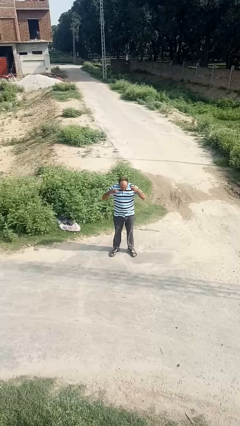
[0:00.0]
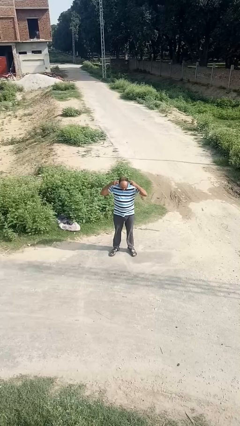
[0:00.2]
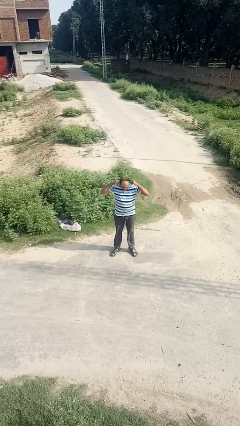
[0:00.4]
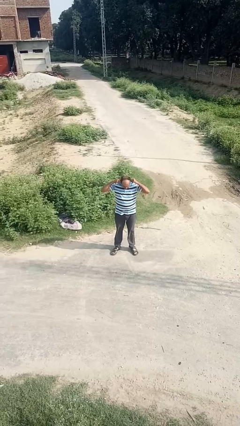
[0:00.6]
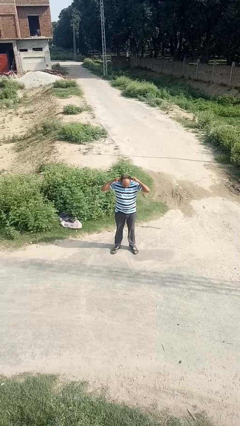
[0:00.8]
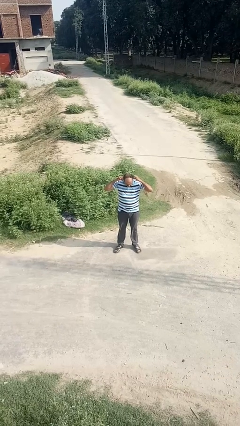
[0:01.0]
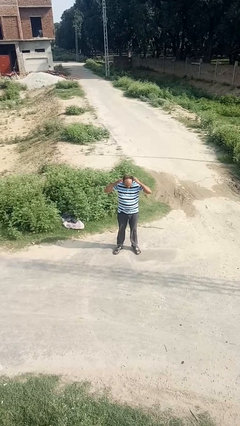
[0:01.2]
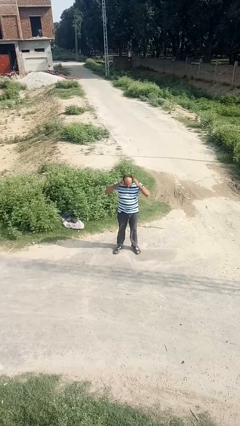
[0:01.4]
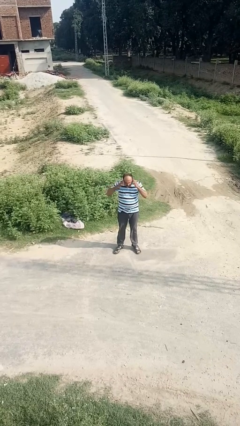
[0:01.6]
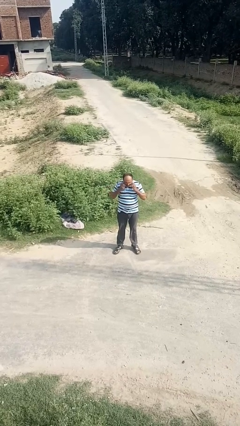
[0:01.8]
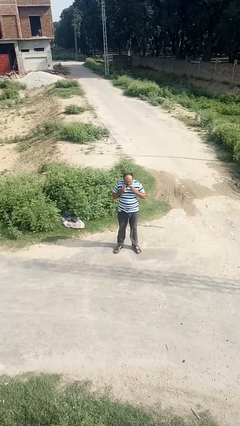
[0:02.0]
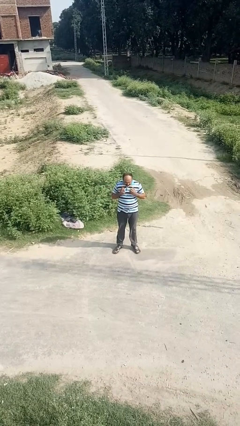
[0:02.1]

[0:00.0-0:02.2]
person puts on earrings

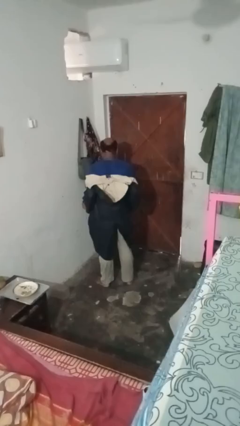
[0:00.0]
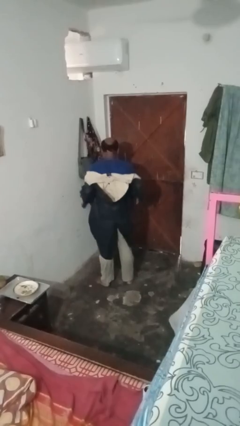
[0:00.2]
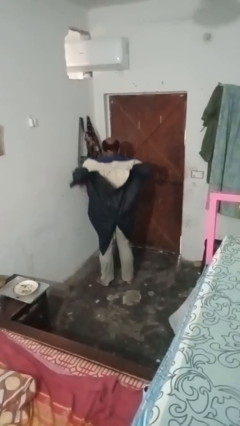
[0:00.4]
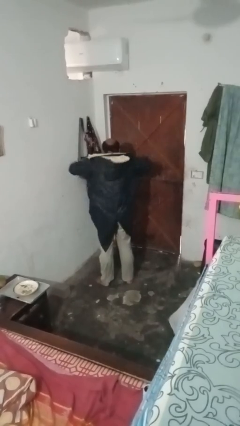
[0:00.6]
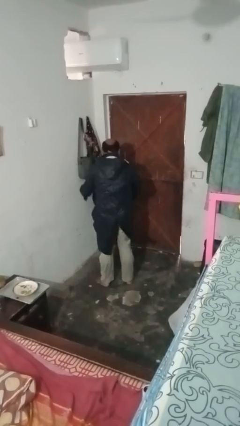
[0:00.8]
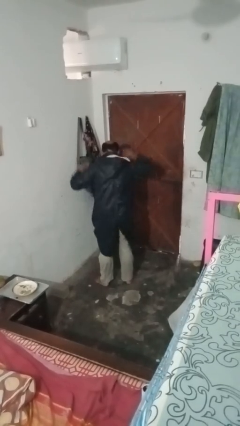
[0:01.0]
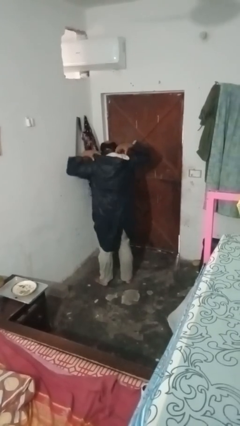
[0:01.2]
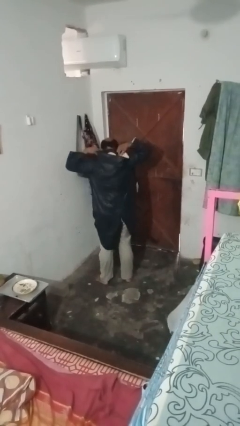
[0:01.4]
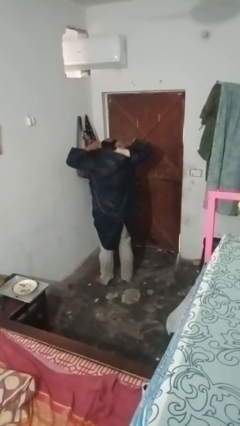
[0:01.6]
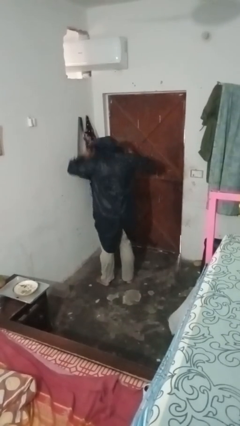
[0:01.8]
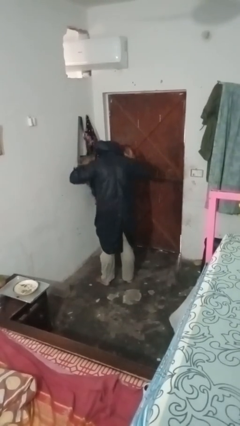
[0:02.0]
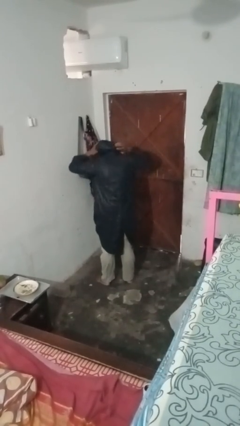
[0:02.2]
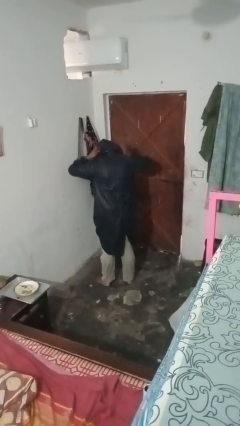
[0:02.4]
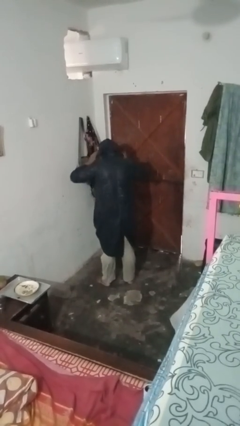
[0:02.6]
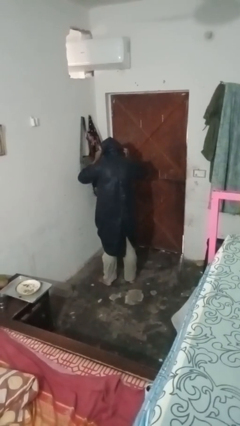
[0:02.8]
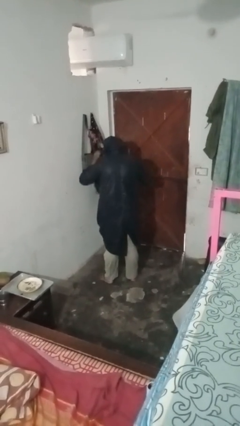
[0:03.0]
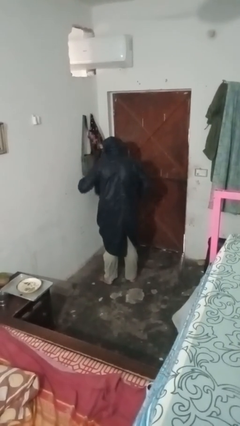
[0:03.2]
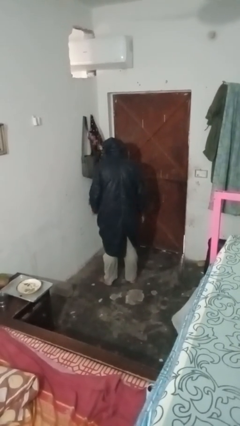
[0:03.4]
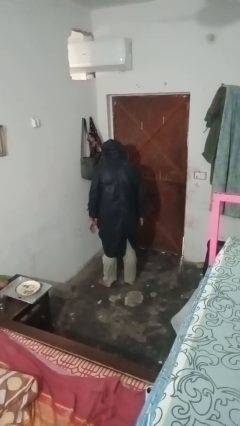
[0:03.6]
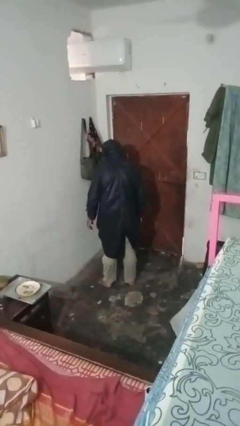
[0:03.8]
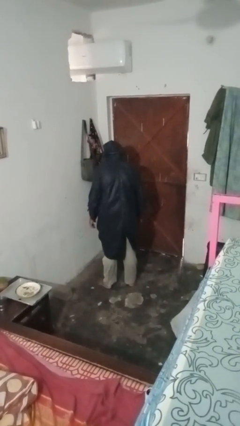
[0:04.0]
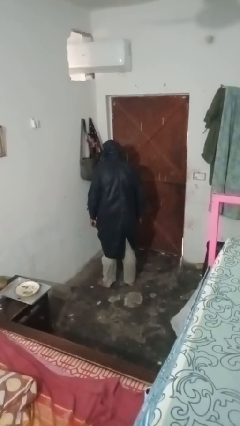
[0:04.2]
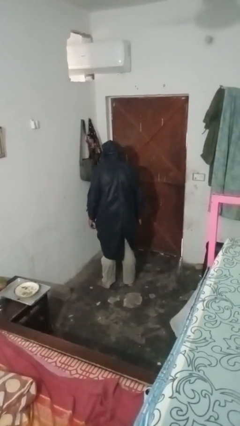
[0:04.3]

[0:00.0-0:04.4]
person puts on hoodie

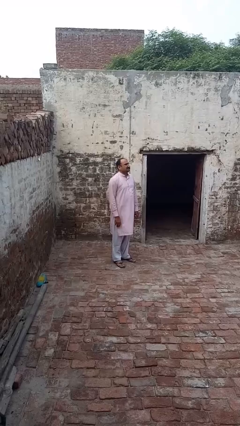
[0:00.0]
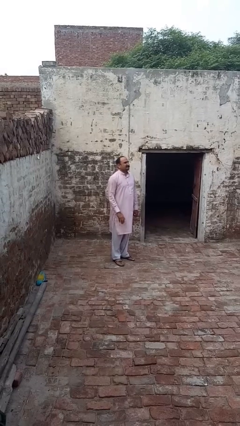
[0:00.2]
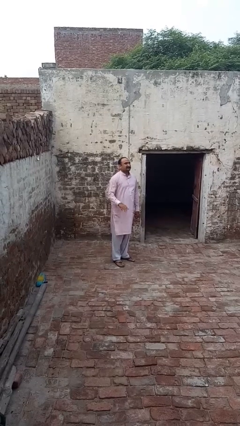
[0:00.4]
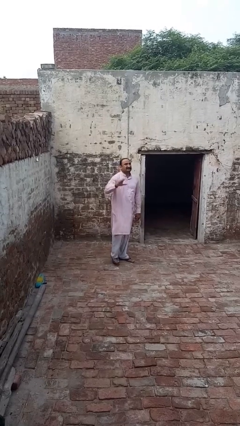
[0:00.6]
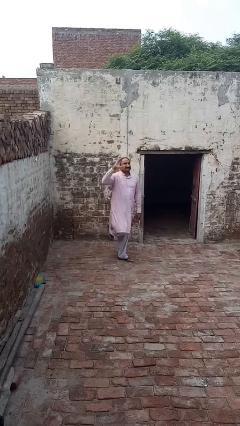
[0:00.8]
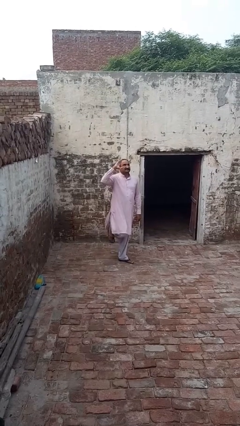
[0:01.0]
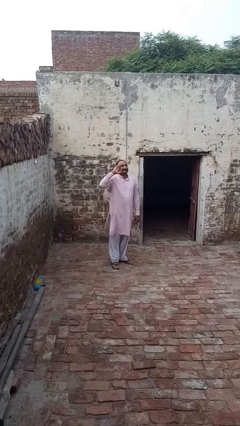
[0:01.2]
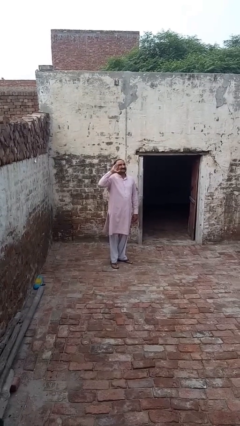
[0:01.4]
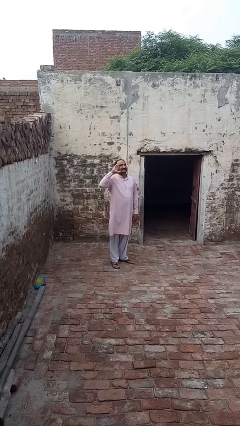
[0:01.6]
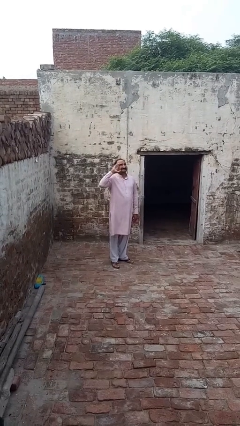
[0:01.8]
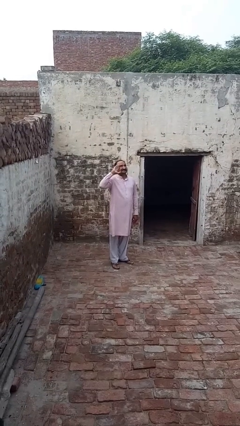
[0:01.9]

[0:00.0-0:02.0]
person salutes

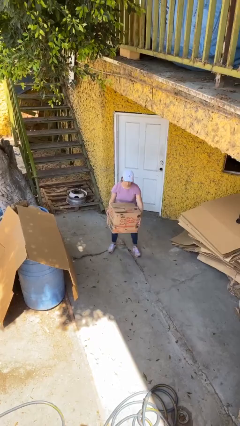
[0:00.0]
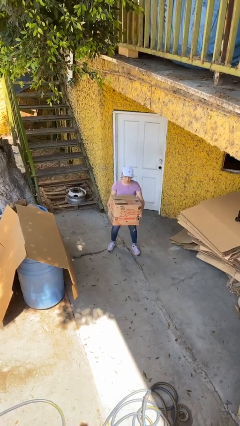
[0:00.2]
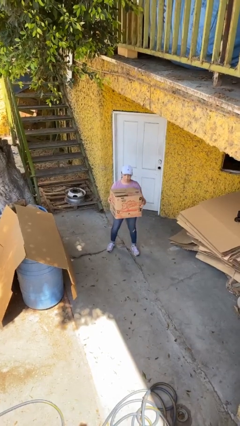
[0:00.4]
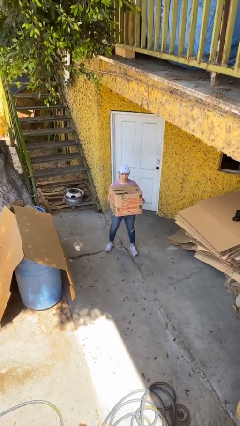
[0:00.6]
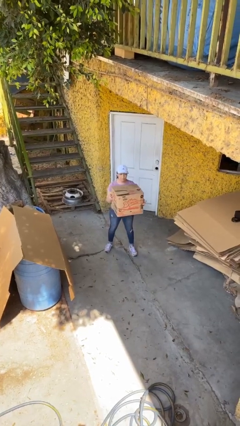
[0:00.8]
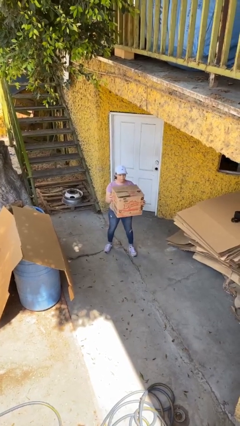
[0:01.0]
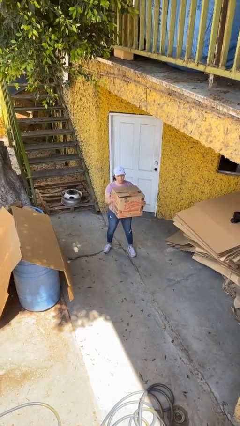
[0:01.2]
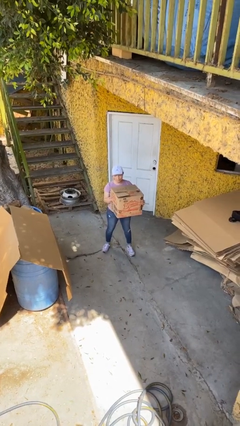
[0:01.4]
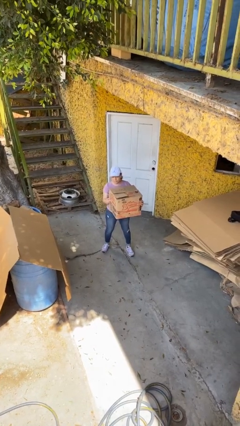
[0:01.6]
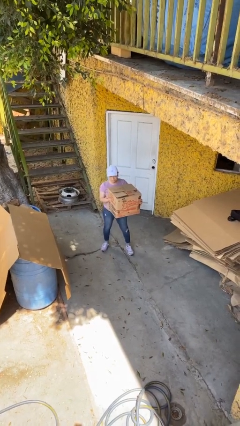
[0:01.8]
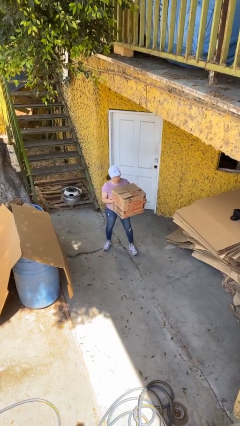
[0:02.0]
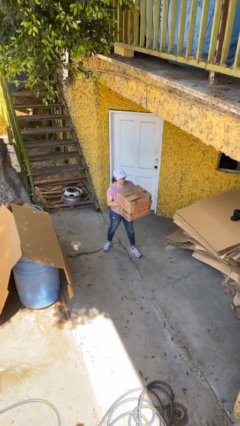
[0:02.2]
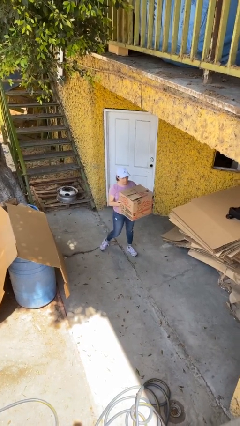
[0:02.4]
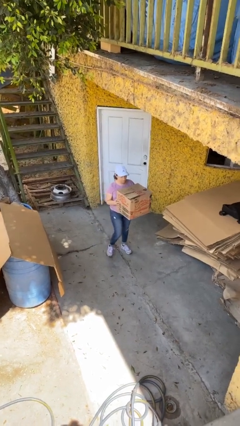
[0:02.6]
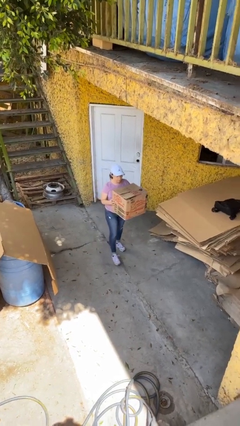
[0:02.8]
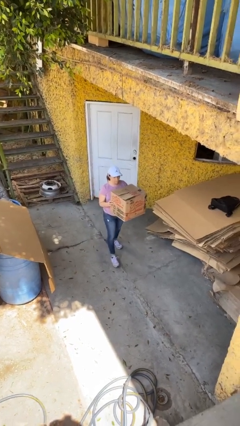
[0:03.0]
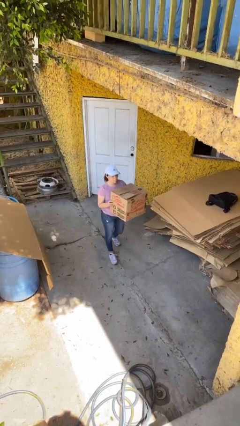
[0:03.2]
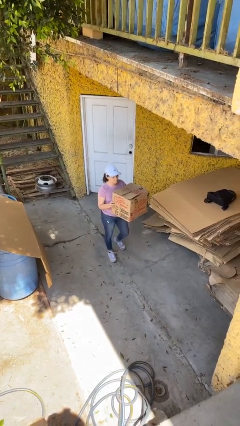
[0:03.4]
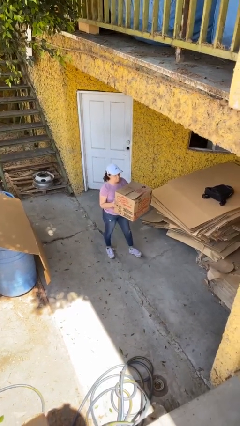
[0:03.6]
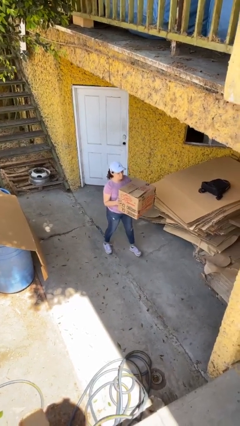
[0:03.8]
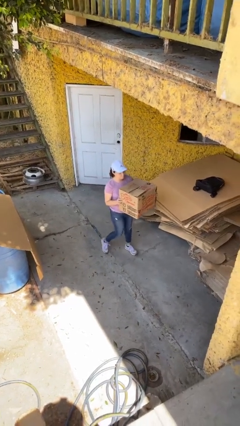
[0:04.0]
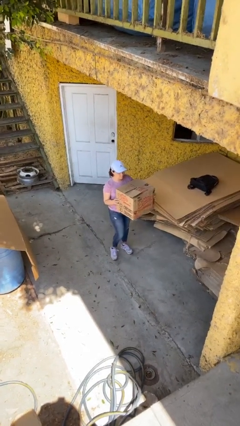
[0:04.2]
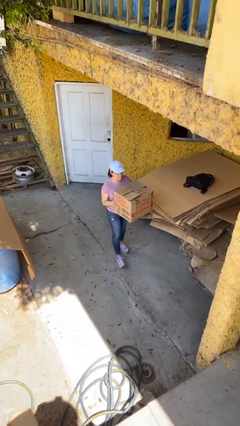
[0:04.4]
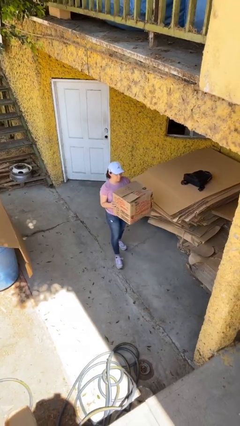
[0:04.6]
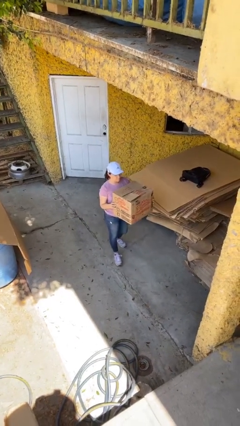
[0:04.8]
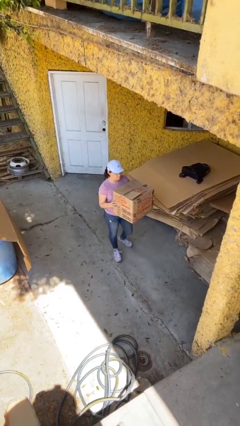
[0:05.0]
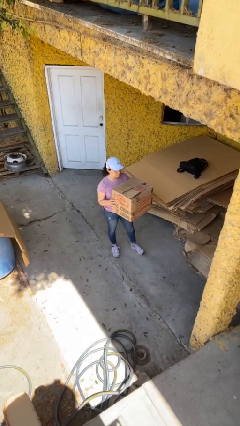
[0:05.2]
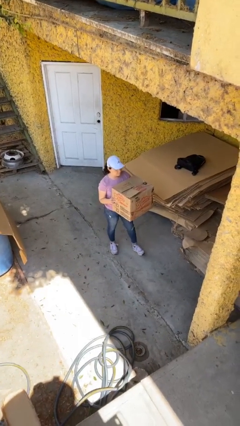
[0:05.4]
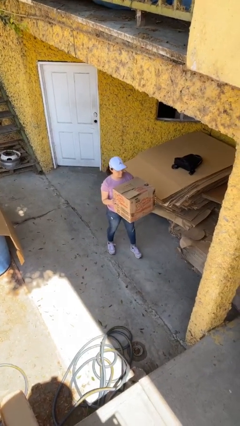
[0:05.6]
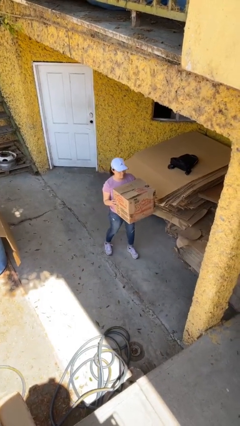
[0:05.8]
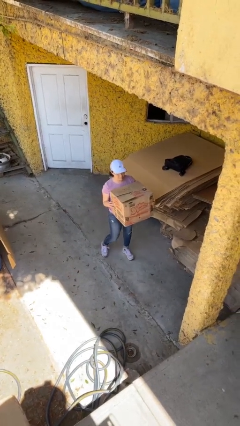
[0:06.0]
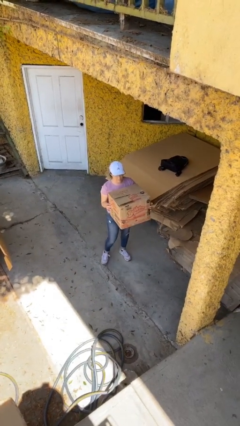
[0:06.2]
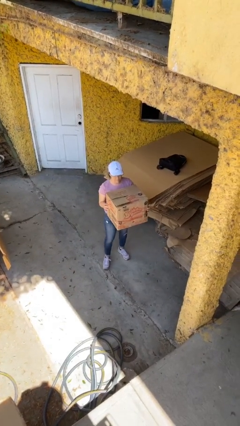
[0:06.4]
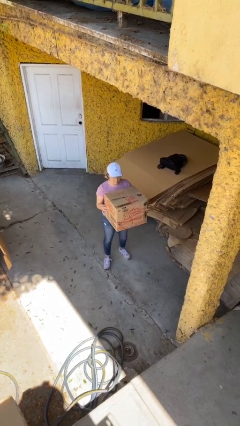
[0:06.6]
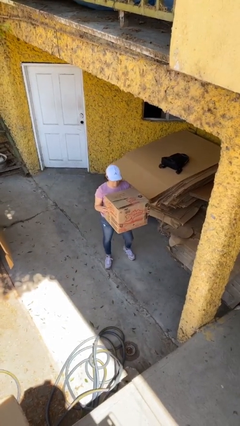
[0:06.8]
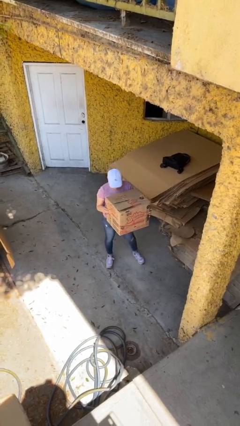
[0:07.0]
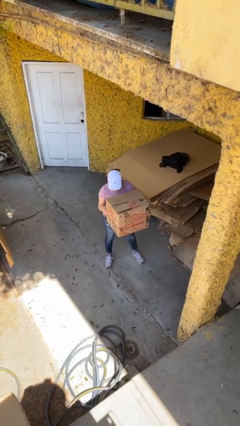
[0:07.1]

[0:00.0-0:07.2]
person carries heavy object

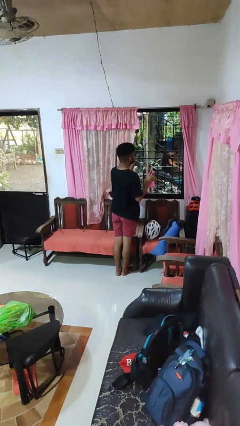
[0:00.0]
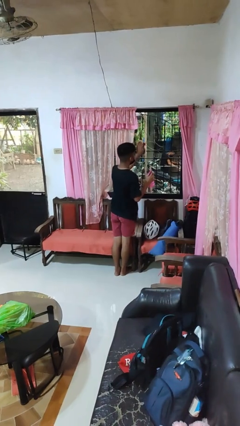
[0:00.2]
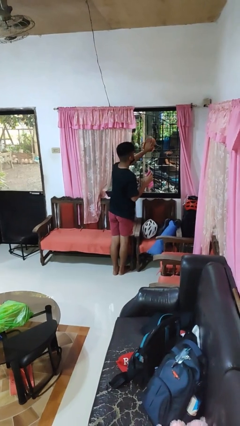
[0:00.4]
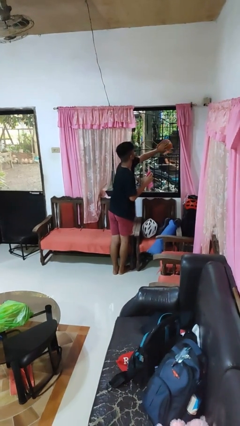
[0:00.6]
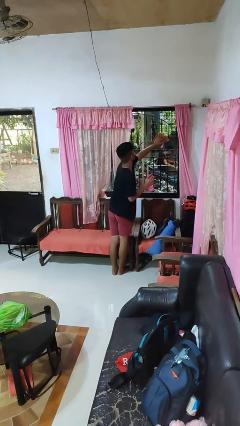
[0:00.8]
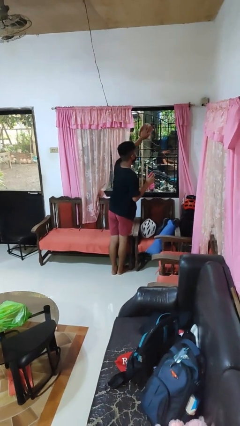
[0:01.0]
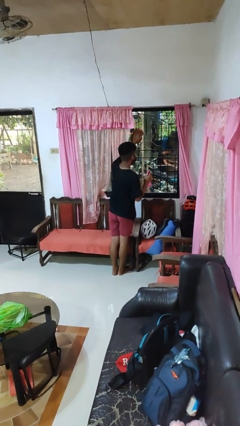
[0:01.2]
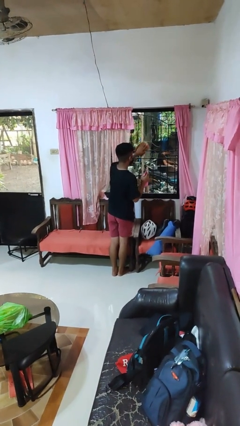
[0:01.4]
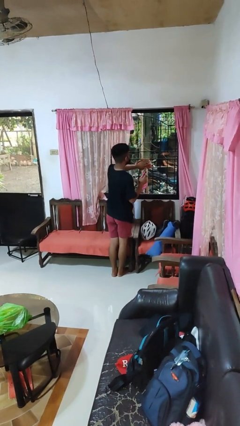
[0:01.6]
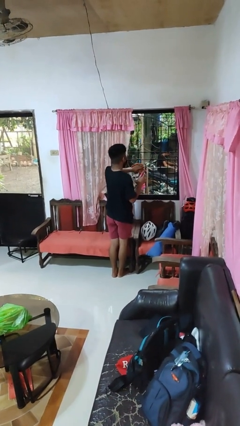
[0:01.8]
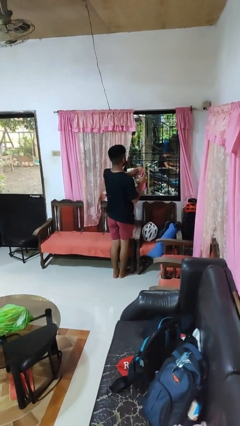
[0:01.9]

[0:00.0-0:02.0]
person washes window
